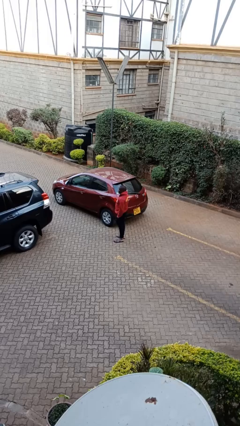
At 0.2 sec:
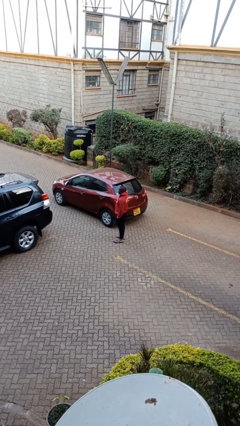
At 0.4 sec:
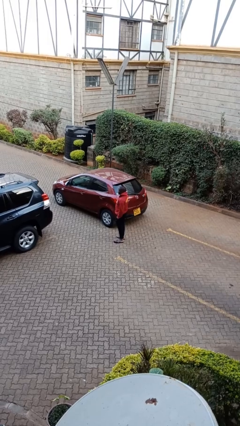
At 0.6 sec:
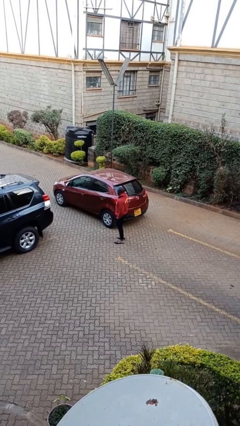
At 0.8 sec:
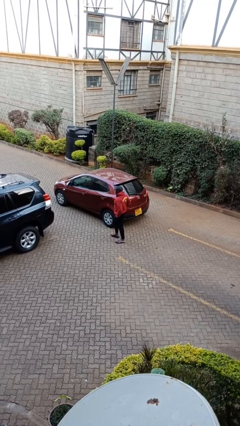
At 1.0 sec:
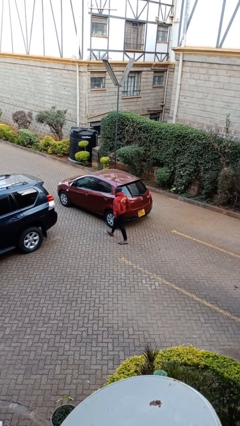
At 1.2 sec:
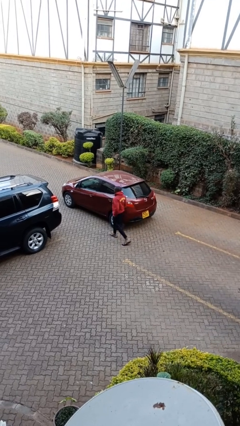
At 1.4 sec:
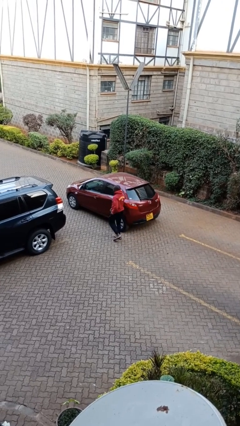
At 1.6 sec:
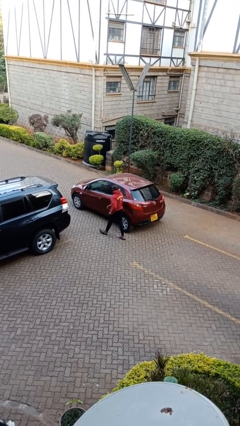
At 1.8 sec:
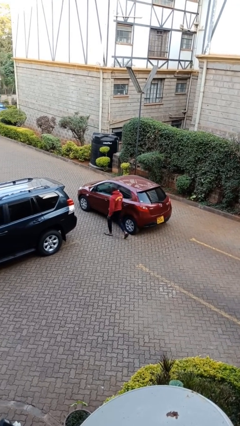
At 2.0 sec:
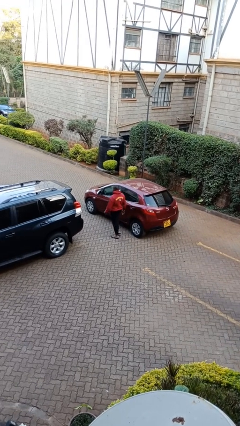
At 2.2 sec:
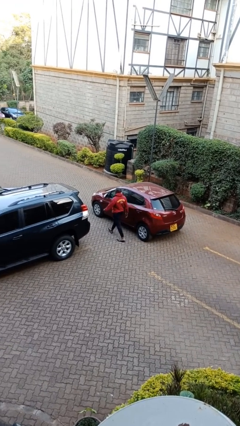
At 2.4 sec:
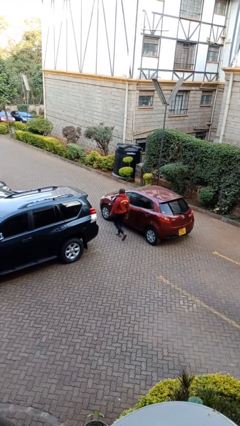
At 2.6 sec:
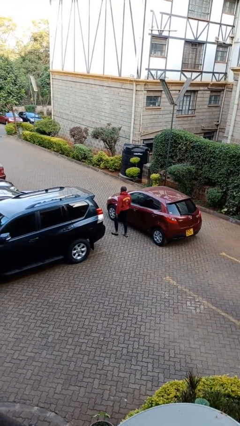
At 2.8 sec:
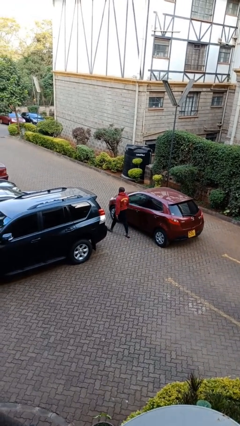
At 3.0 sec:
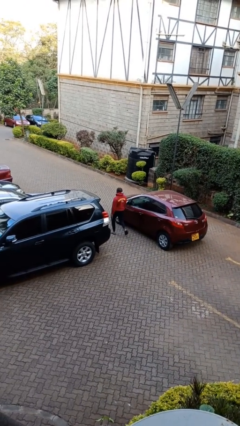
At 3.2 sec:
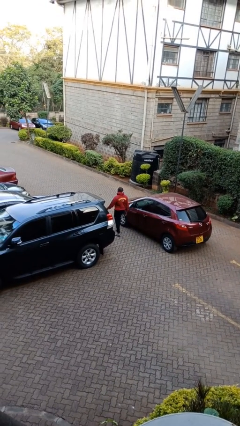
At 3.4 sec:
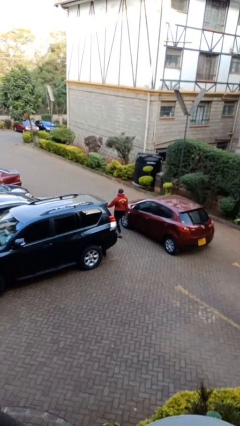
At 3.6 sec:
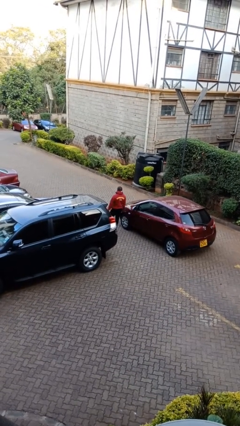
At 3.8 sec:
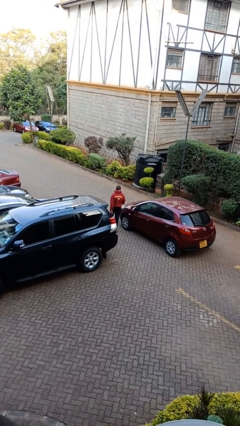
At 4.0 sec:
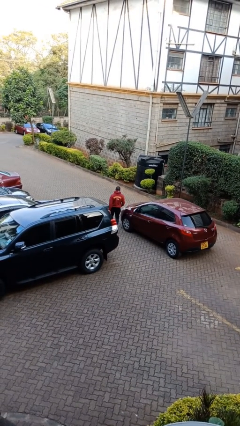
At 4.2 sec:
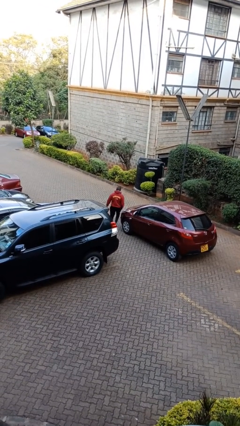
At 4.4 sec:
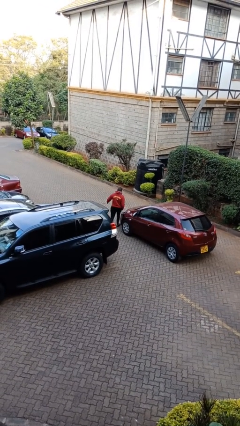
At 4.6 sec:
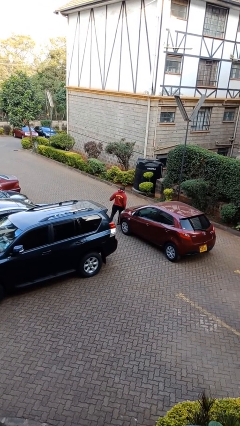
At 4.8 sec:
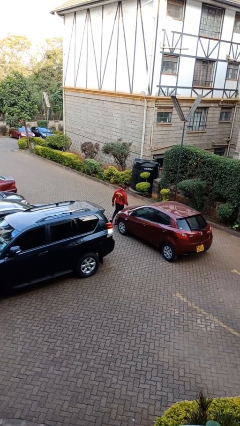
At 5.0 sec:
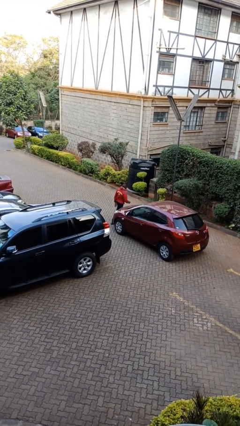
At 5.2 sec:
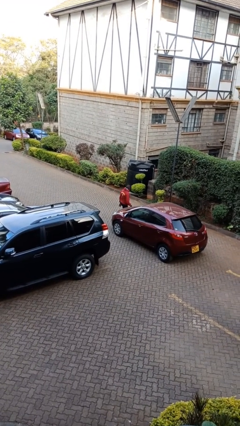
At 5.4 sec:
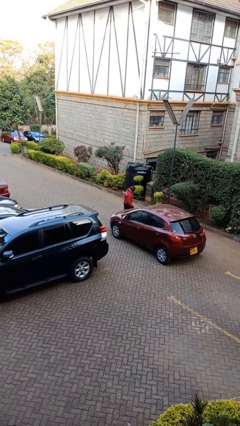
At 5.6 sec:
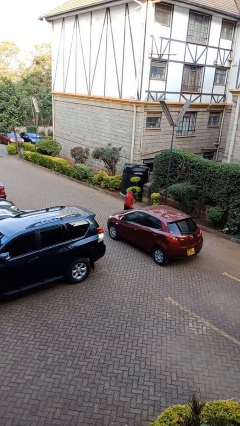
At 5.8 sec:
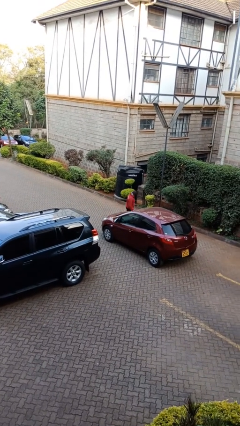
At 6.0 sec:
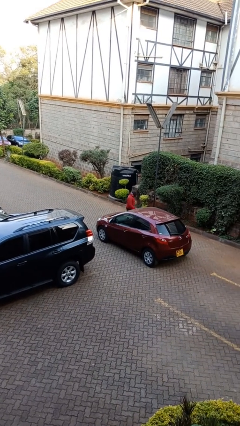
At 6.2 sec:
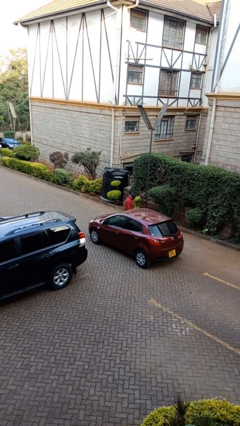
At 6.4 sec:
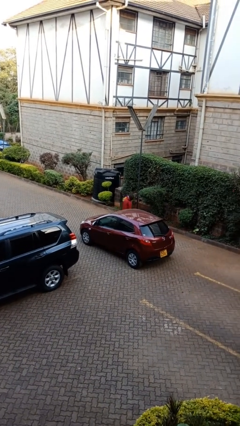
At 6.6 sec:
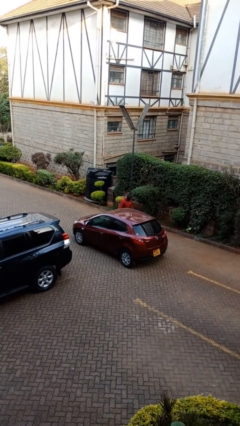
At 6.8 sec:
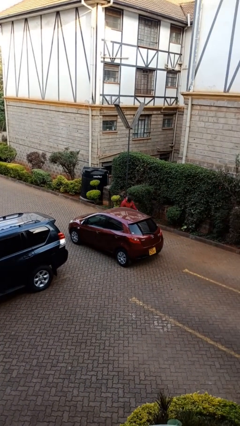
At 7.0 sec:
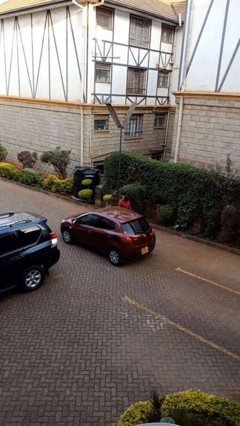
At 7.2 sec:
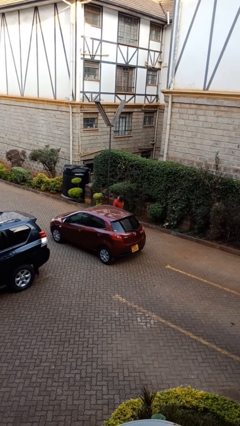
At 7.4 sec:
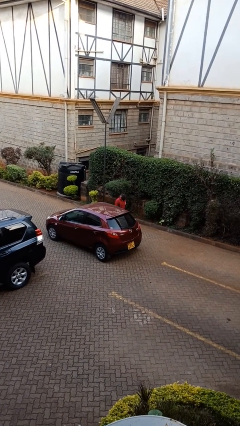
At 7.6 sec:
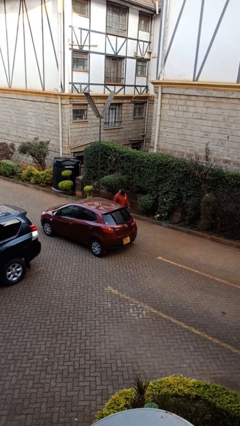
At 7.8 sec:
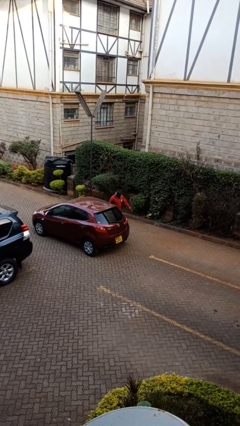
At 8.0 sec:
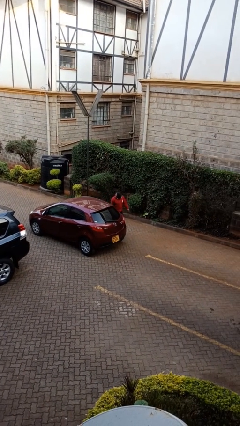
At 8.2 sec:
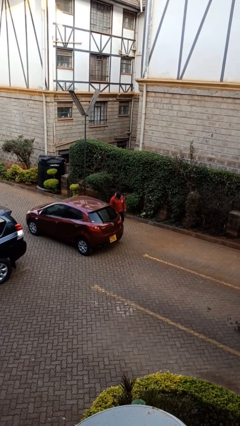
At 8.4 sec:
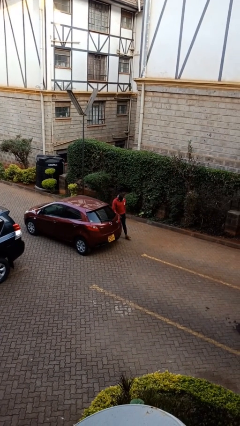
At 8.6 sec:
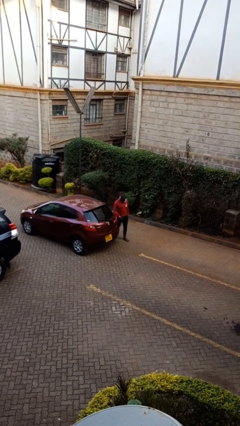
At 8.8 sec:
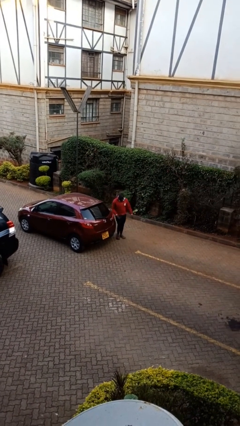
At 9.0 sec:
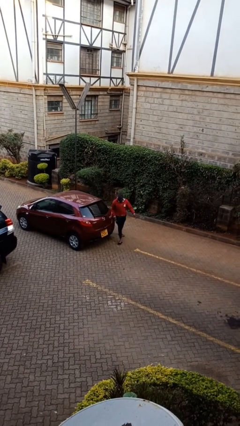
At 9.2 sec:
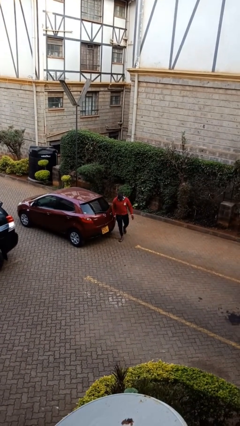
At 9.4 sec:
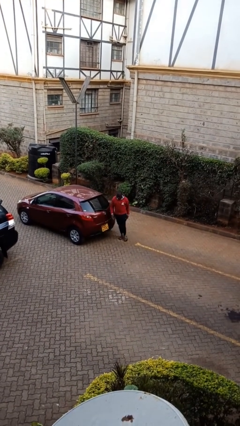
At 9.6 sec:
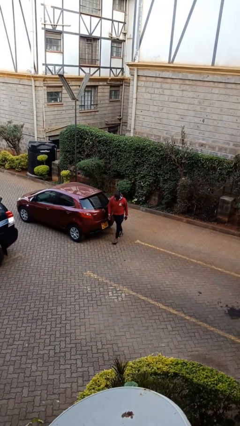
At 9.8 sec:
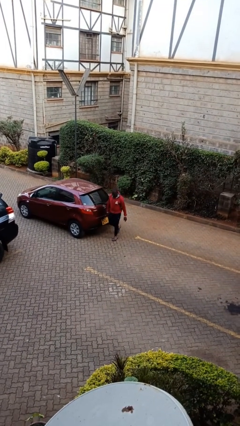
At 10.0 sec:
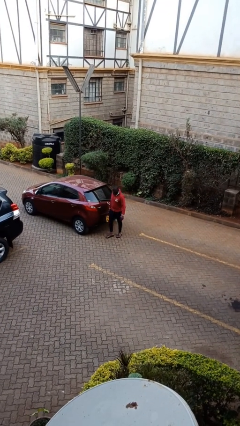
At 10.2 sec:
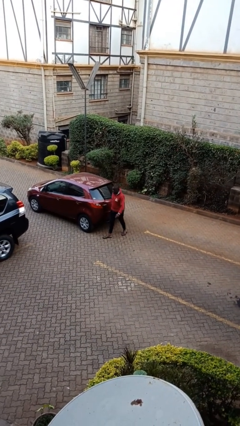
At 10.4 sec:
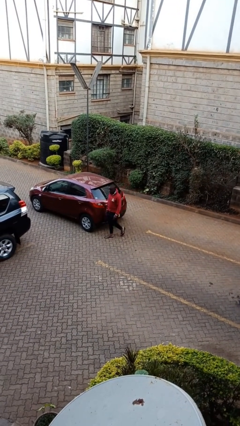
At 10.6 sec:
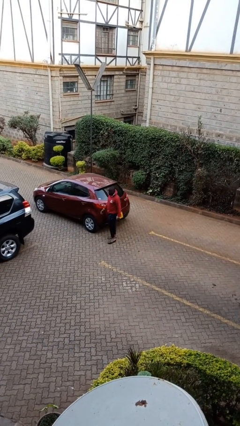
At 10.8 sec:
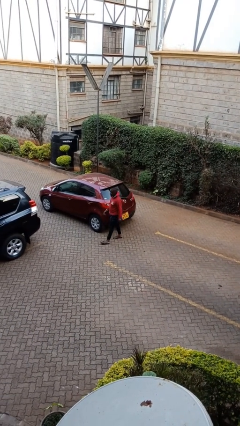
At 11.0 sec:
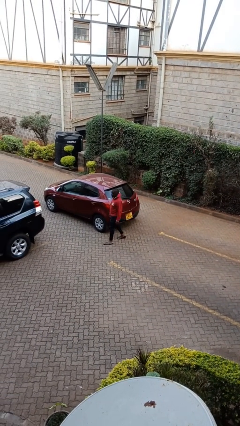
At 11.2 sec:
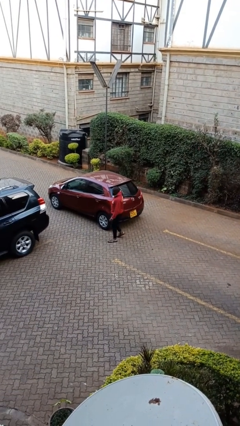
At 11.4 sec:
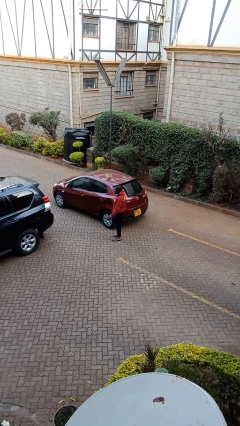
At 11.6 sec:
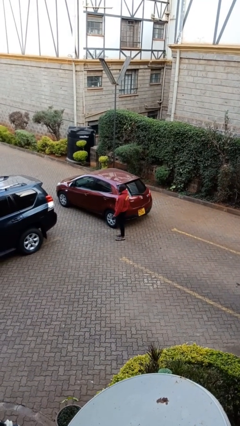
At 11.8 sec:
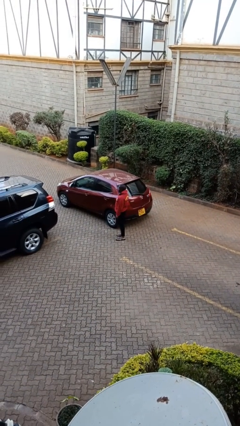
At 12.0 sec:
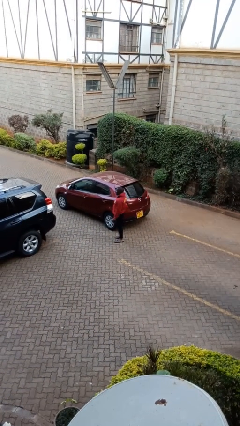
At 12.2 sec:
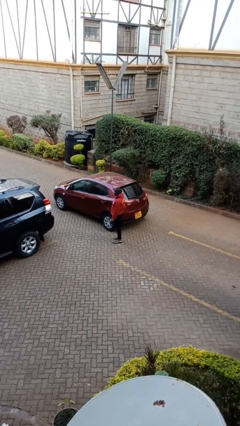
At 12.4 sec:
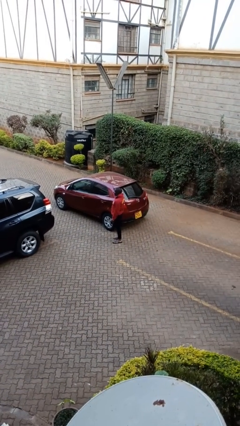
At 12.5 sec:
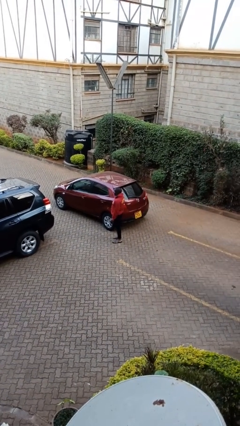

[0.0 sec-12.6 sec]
person walks around car

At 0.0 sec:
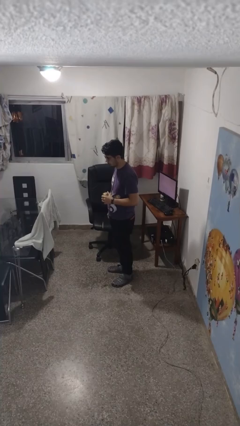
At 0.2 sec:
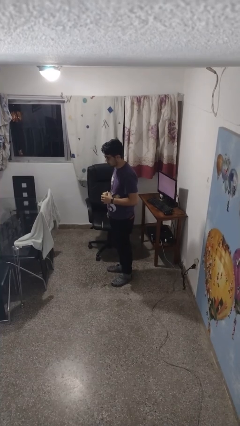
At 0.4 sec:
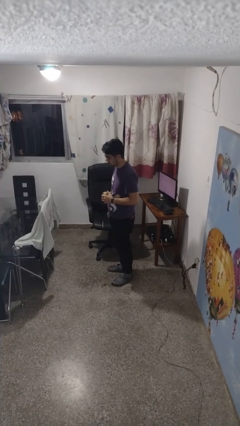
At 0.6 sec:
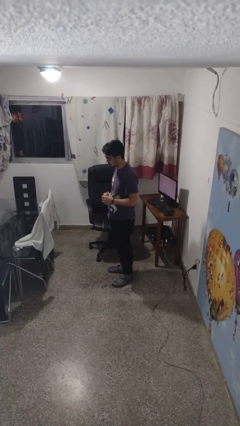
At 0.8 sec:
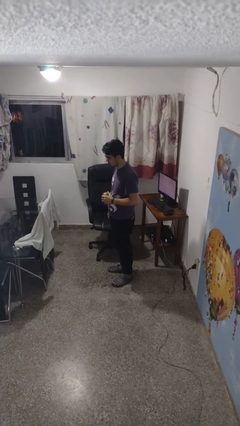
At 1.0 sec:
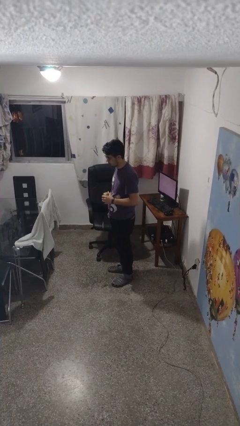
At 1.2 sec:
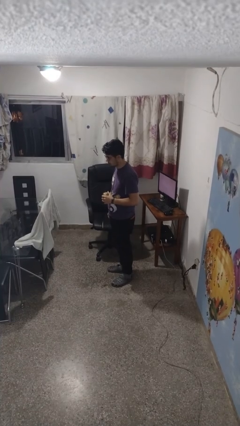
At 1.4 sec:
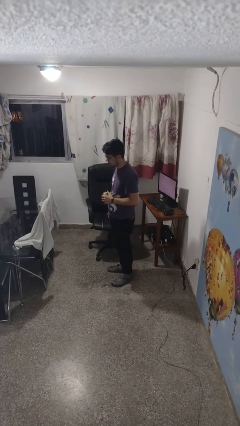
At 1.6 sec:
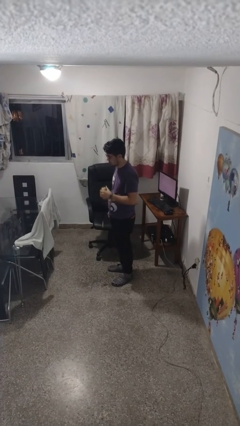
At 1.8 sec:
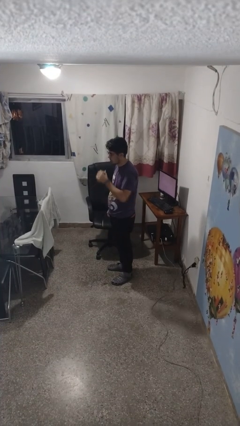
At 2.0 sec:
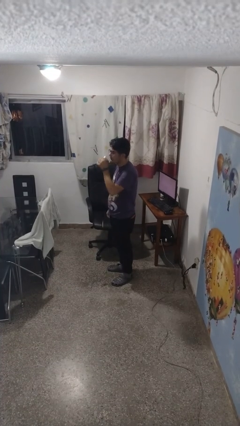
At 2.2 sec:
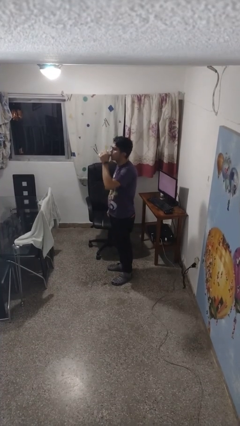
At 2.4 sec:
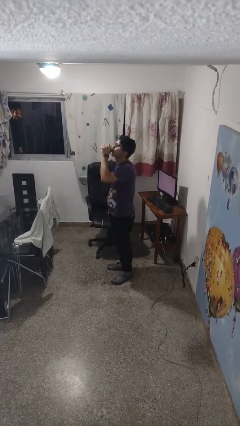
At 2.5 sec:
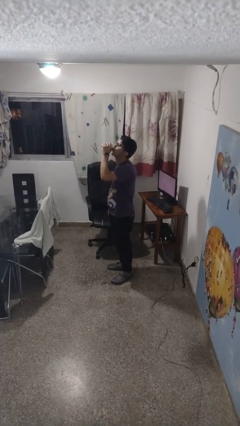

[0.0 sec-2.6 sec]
person drinks from beverage can

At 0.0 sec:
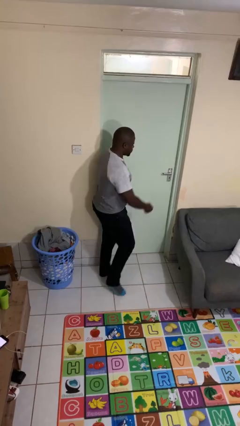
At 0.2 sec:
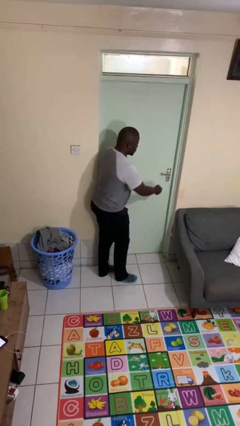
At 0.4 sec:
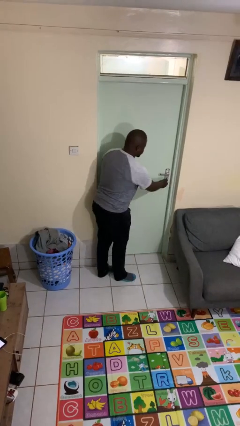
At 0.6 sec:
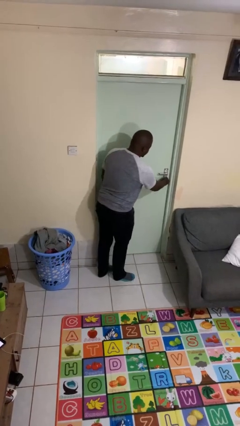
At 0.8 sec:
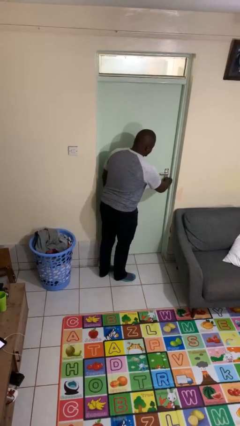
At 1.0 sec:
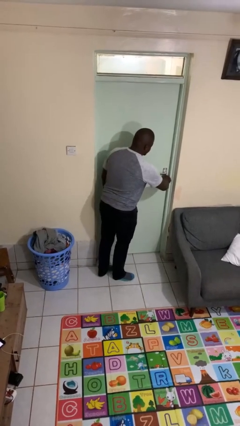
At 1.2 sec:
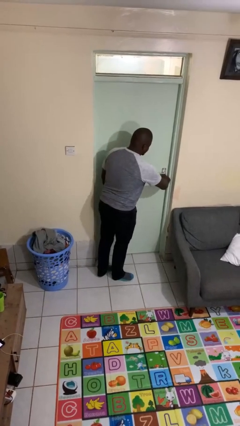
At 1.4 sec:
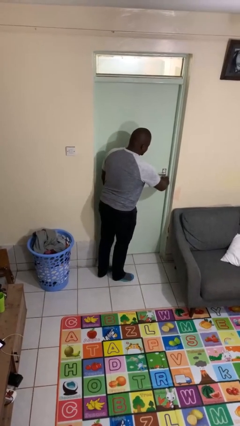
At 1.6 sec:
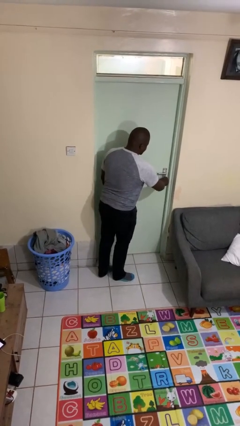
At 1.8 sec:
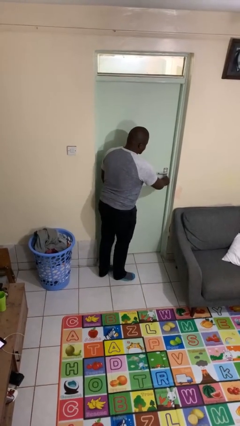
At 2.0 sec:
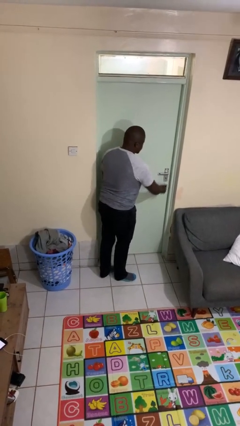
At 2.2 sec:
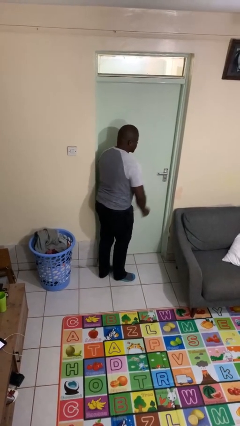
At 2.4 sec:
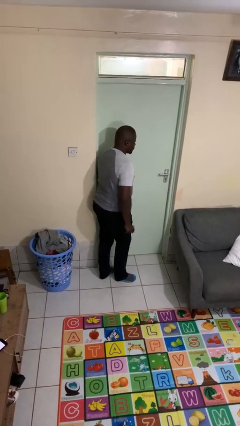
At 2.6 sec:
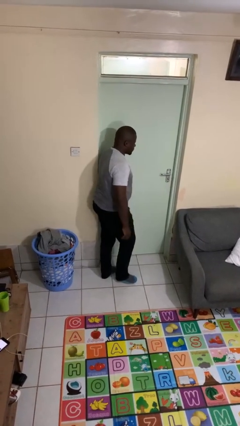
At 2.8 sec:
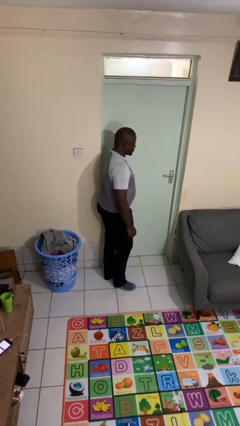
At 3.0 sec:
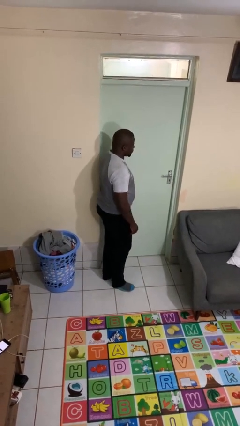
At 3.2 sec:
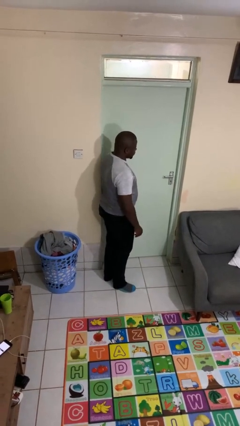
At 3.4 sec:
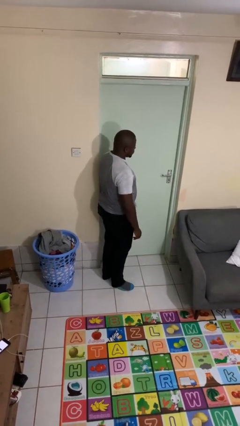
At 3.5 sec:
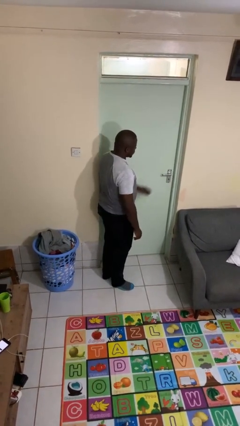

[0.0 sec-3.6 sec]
person unlocks door with keys
